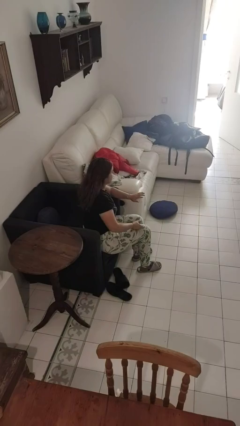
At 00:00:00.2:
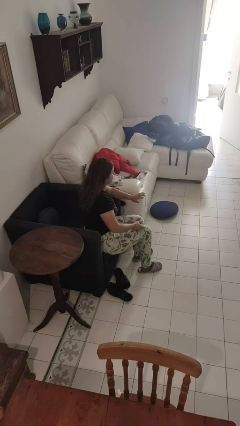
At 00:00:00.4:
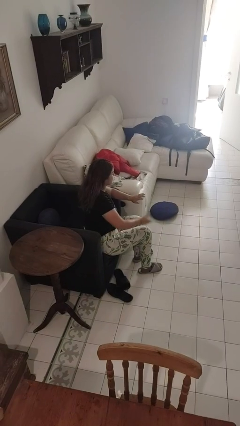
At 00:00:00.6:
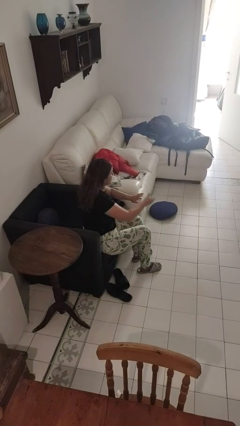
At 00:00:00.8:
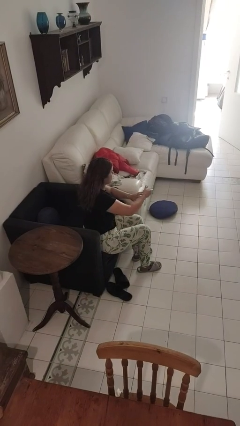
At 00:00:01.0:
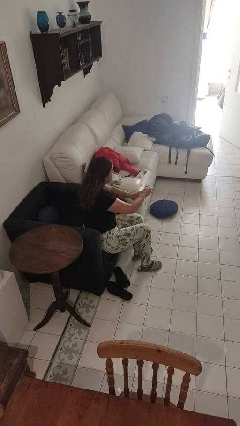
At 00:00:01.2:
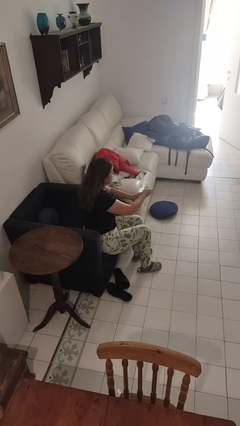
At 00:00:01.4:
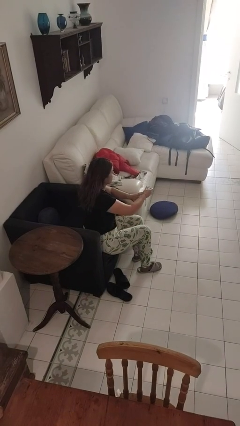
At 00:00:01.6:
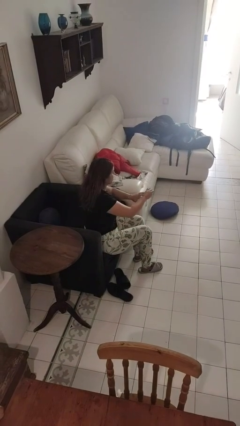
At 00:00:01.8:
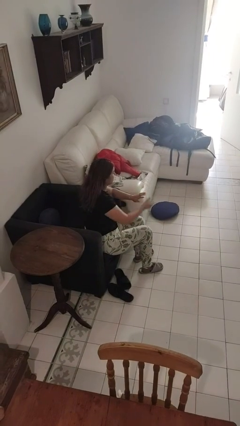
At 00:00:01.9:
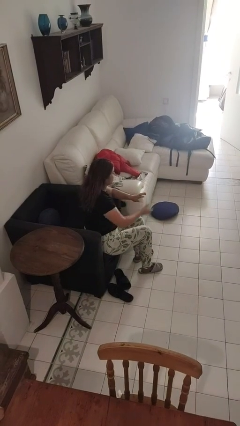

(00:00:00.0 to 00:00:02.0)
person clips fingernails
